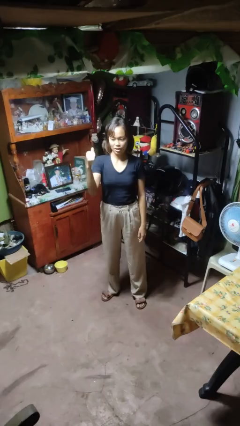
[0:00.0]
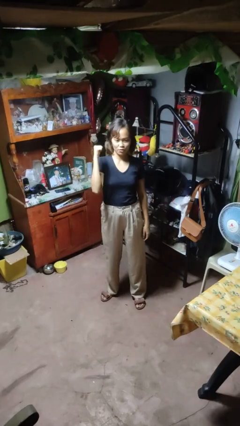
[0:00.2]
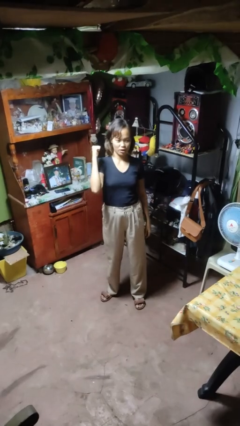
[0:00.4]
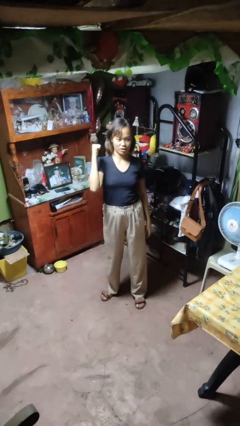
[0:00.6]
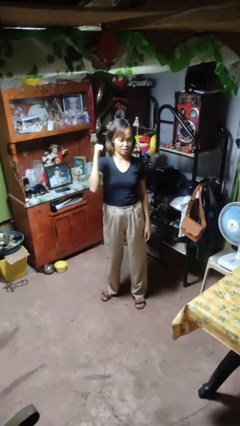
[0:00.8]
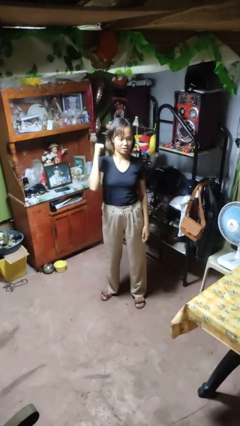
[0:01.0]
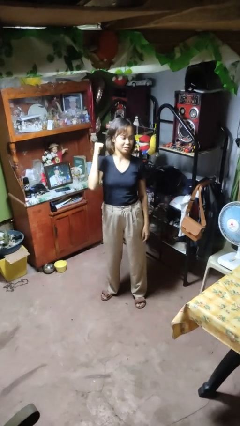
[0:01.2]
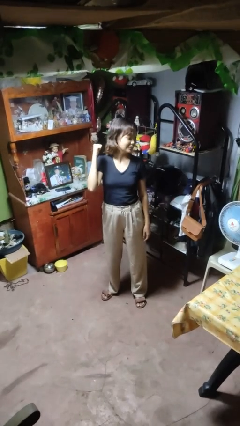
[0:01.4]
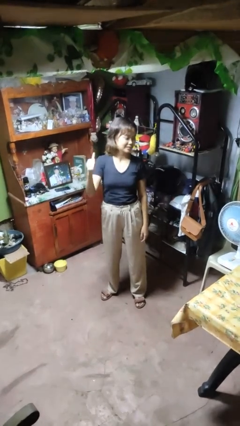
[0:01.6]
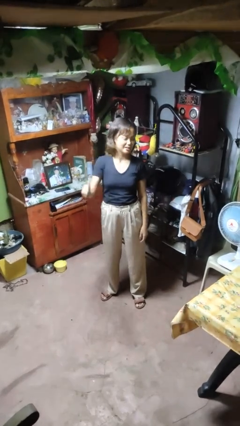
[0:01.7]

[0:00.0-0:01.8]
person gestures behind me

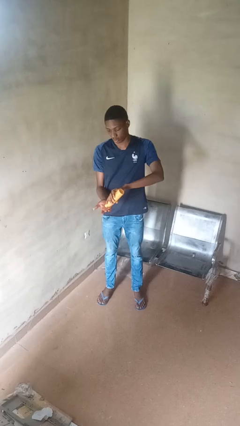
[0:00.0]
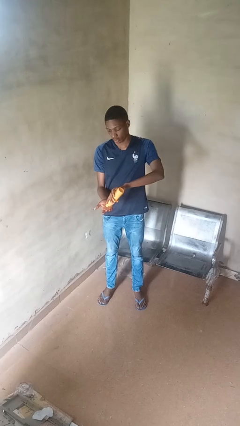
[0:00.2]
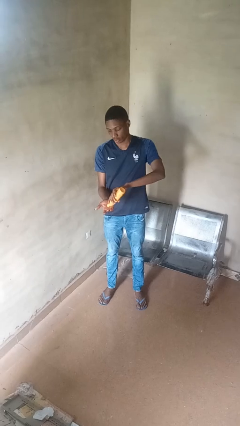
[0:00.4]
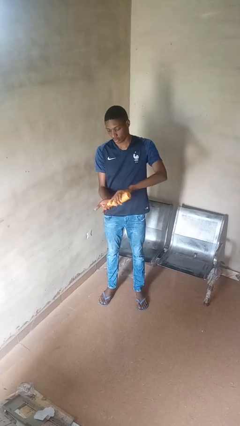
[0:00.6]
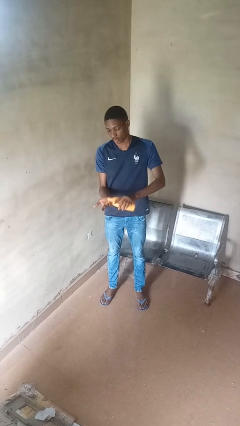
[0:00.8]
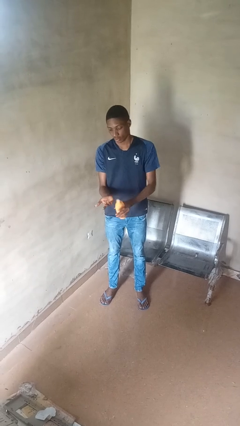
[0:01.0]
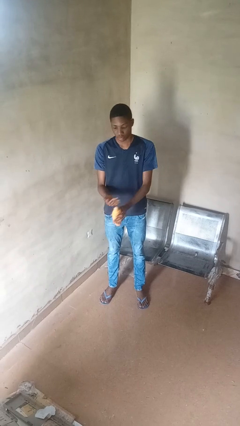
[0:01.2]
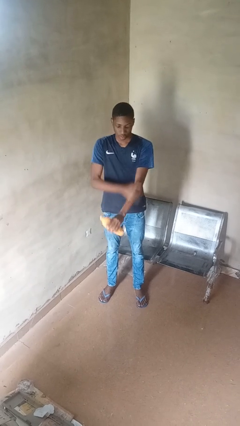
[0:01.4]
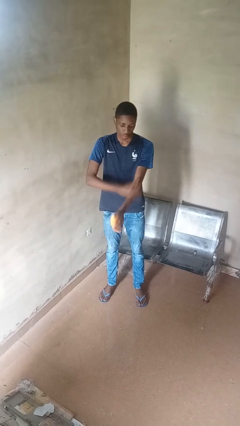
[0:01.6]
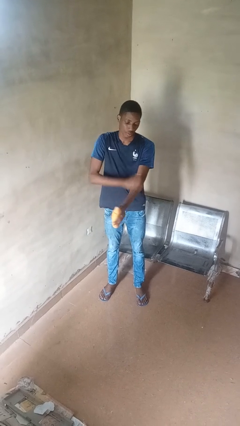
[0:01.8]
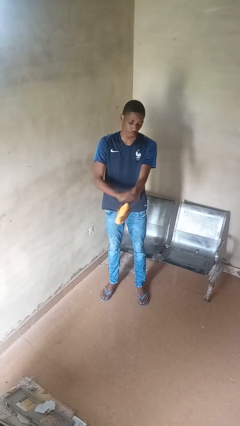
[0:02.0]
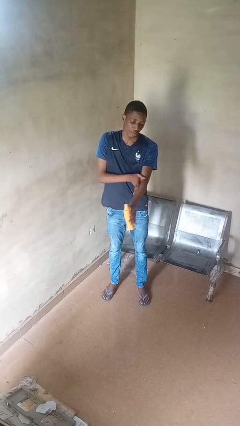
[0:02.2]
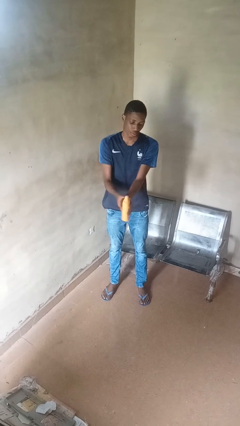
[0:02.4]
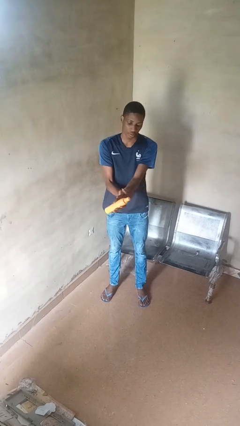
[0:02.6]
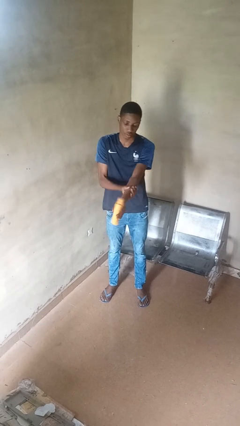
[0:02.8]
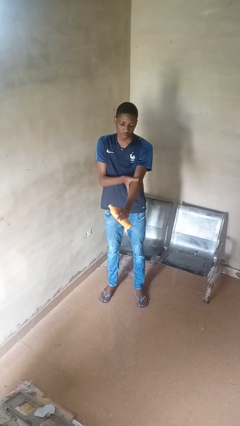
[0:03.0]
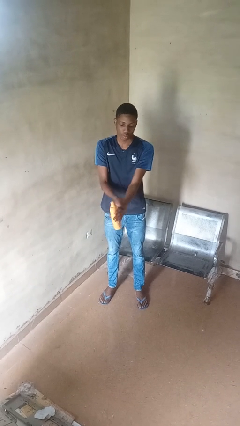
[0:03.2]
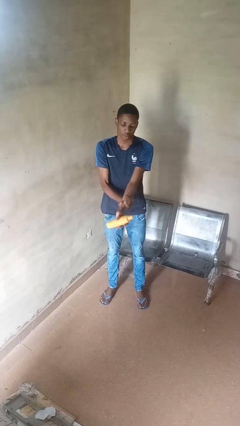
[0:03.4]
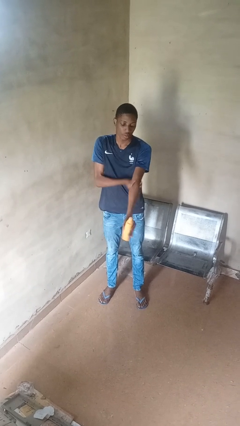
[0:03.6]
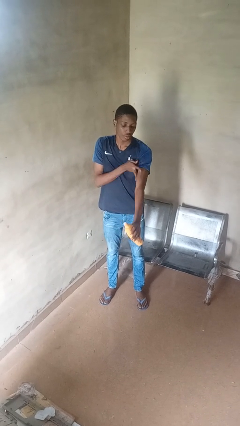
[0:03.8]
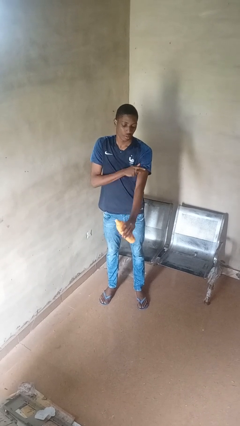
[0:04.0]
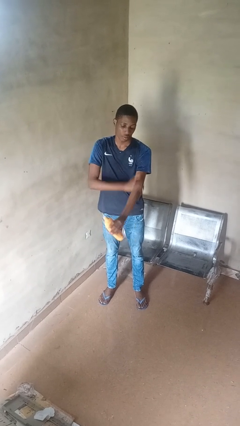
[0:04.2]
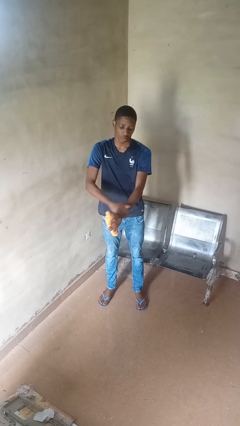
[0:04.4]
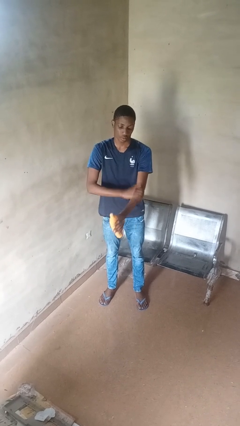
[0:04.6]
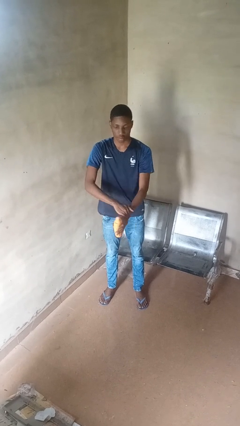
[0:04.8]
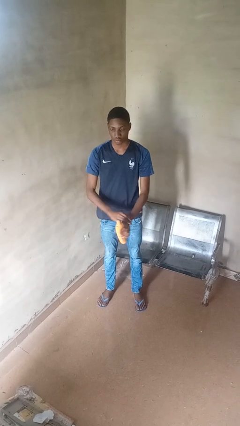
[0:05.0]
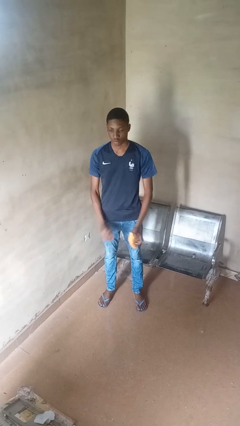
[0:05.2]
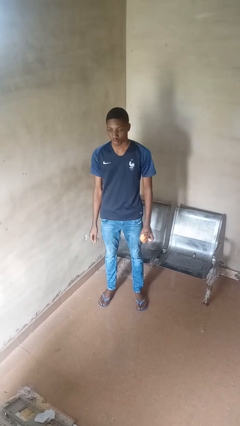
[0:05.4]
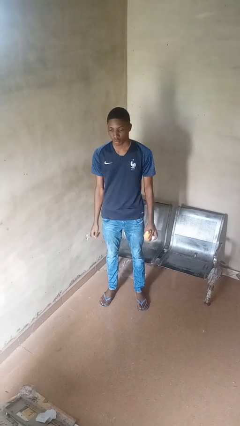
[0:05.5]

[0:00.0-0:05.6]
person applies sunscreen

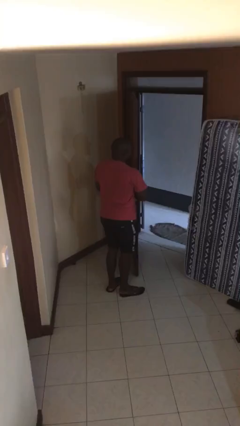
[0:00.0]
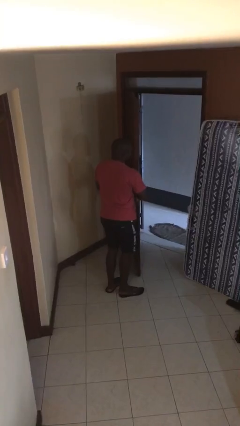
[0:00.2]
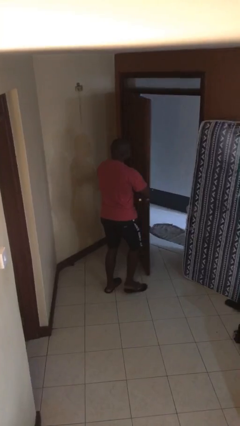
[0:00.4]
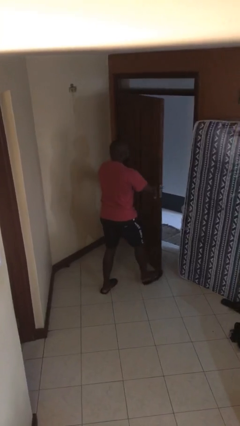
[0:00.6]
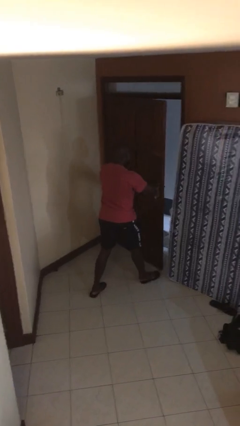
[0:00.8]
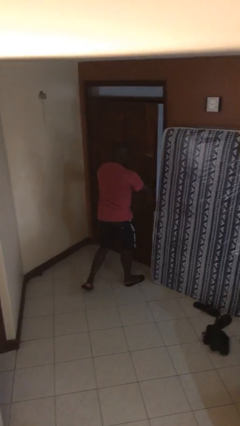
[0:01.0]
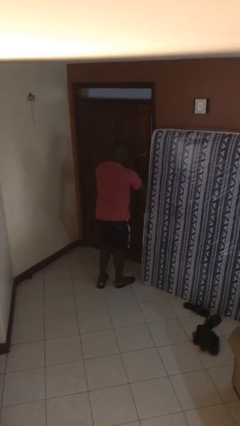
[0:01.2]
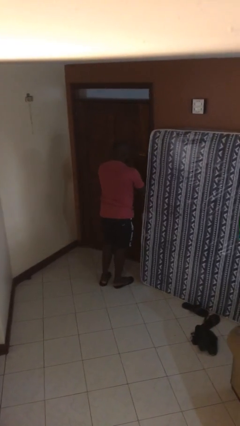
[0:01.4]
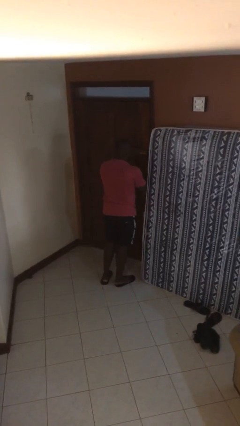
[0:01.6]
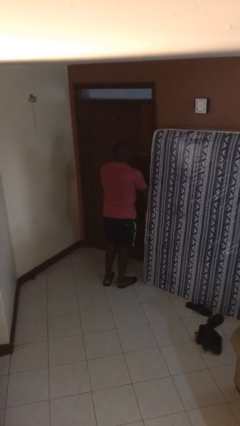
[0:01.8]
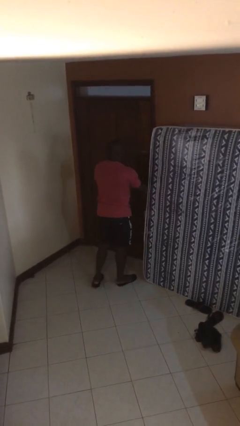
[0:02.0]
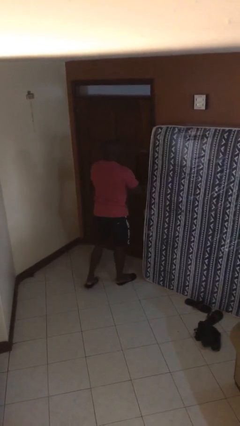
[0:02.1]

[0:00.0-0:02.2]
person closes facility door

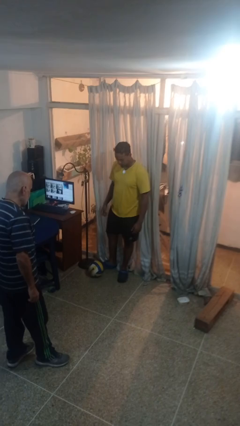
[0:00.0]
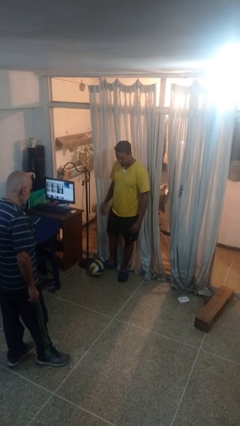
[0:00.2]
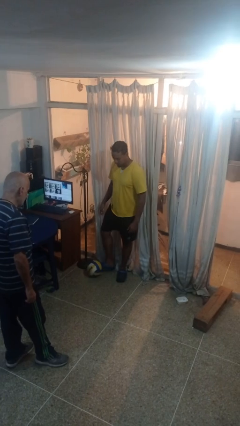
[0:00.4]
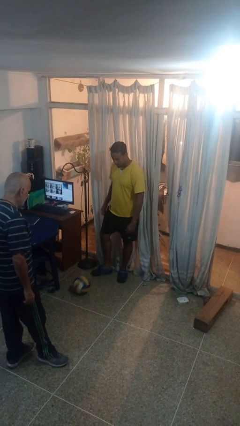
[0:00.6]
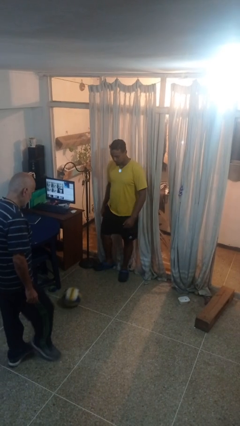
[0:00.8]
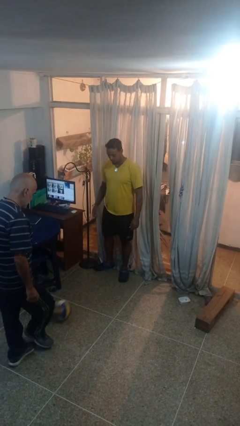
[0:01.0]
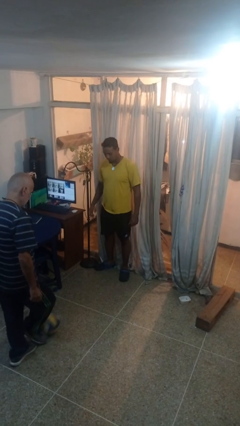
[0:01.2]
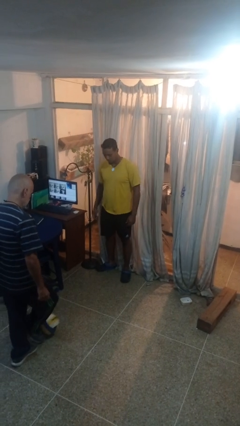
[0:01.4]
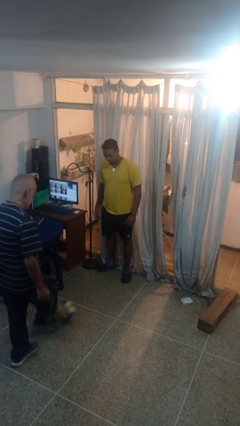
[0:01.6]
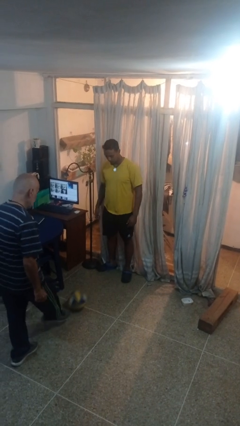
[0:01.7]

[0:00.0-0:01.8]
person kicks object to person

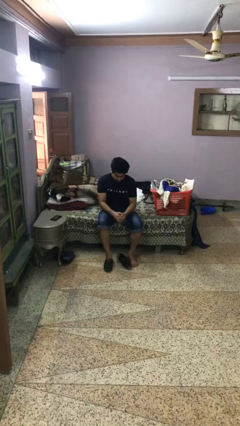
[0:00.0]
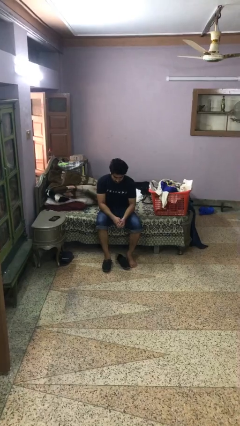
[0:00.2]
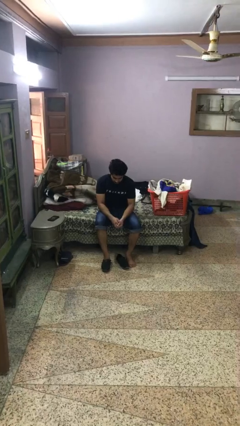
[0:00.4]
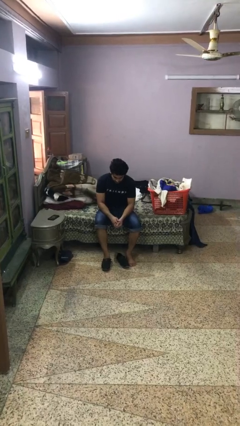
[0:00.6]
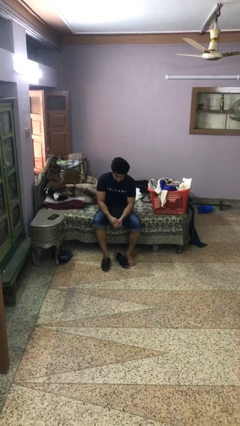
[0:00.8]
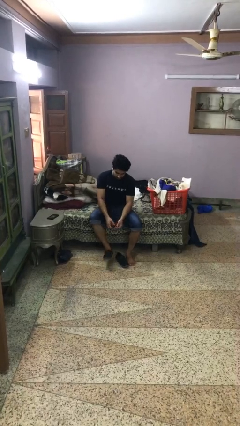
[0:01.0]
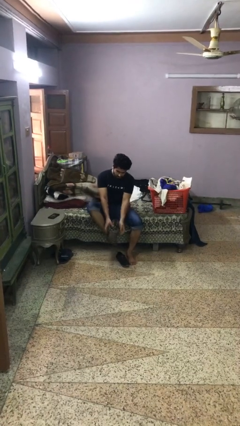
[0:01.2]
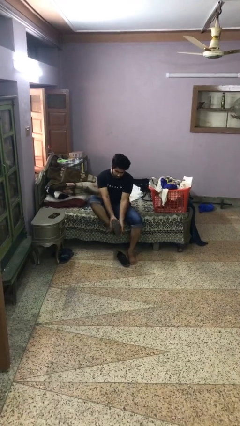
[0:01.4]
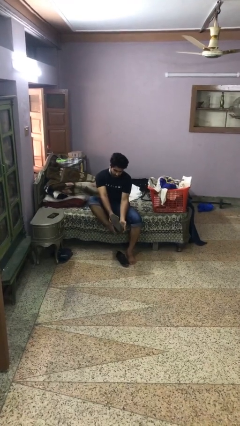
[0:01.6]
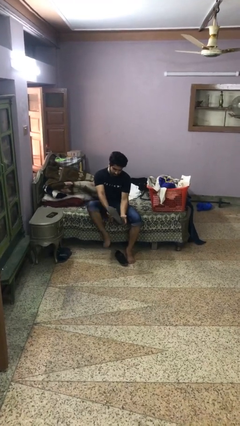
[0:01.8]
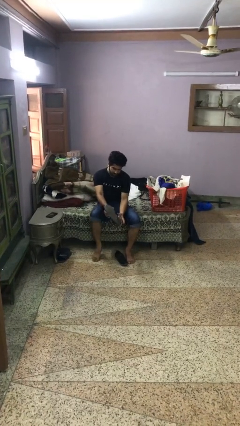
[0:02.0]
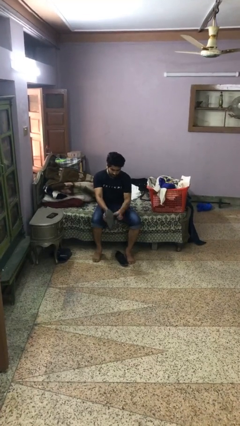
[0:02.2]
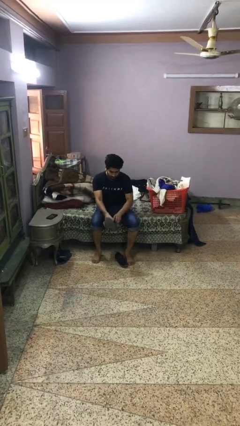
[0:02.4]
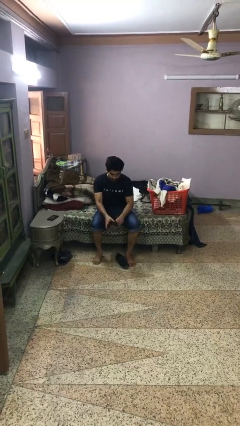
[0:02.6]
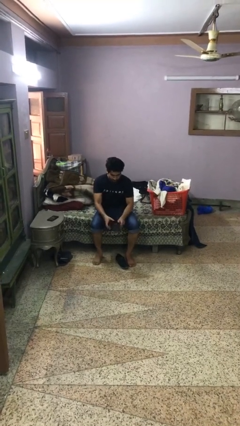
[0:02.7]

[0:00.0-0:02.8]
person takes off boots

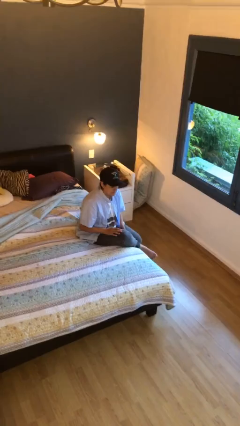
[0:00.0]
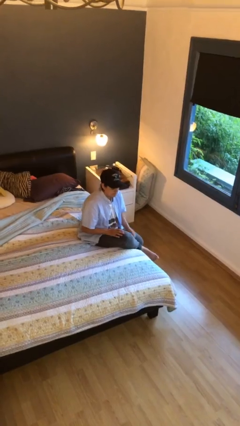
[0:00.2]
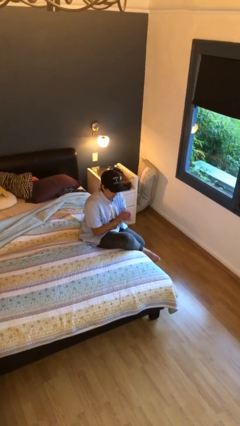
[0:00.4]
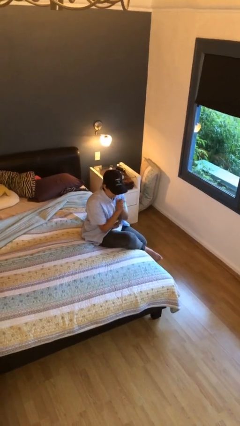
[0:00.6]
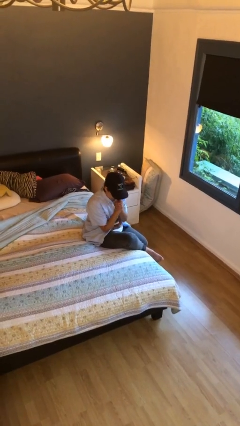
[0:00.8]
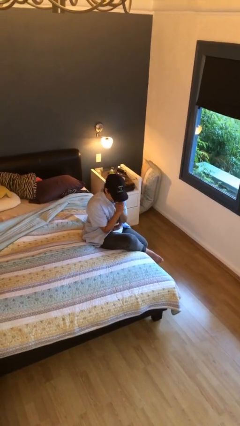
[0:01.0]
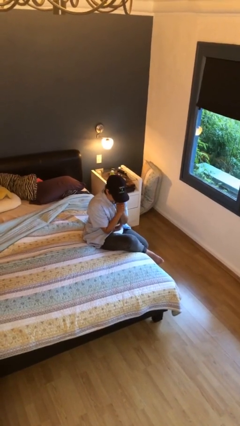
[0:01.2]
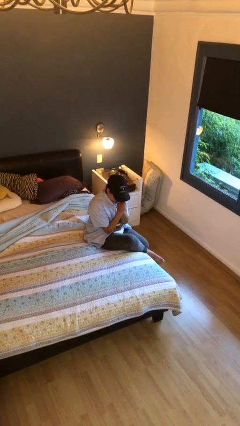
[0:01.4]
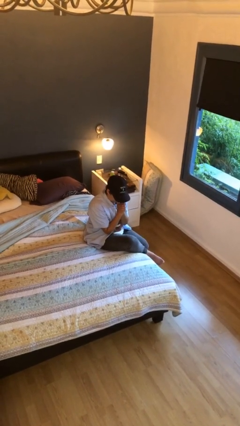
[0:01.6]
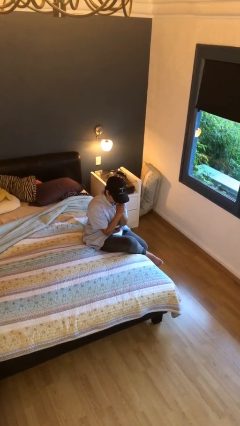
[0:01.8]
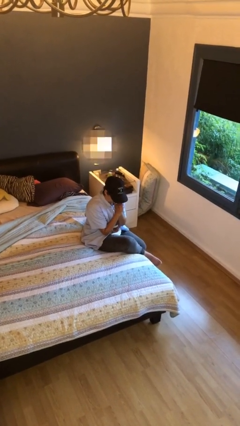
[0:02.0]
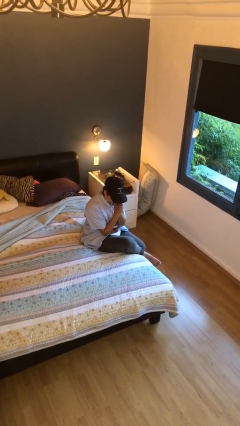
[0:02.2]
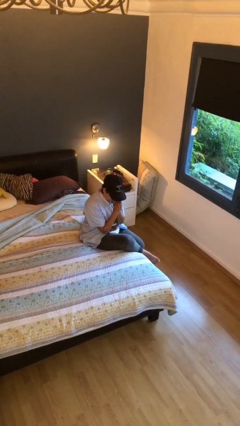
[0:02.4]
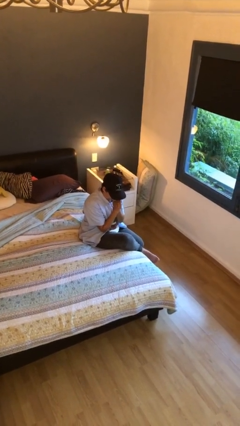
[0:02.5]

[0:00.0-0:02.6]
person prays

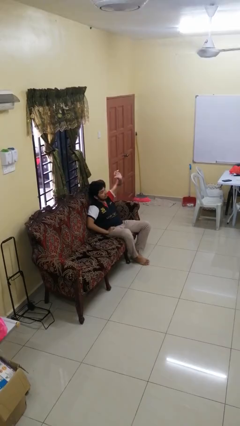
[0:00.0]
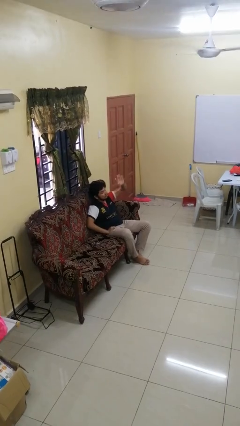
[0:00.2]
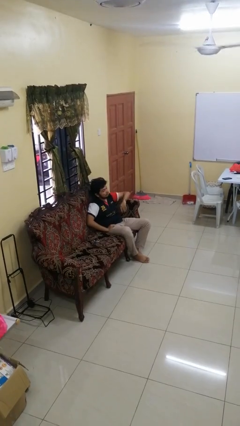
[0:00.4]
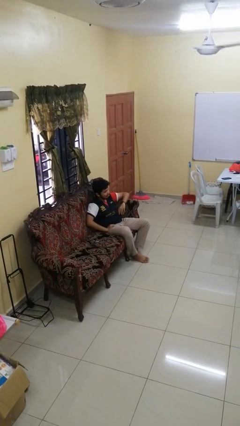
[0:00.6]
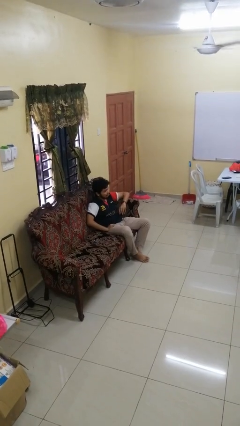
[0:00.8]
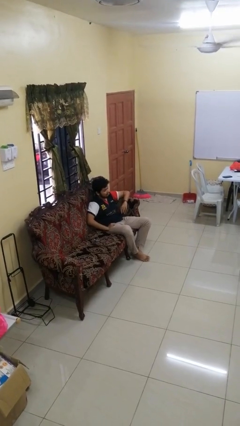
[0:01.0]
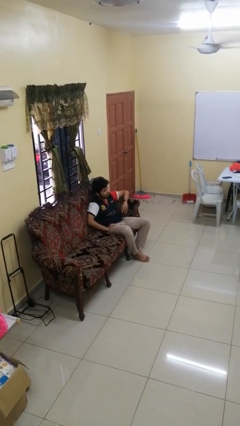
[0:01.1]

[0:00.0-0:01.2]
person gestures swipe down
